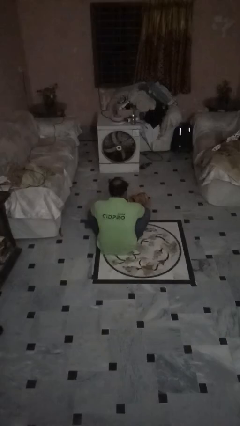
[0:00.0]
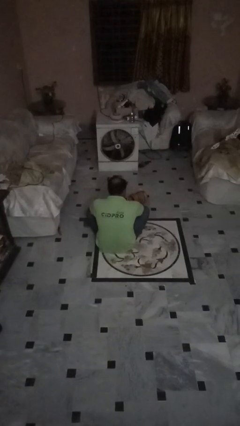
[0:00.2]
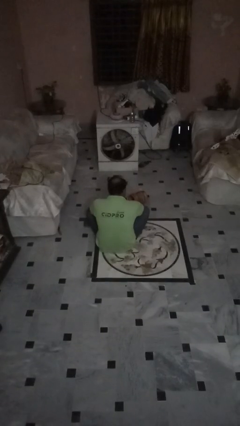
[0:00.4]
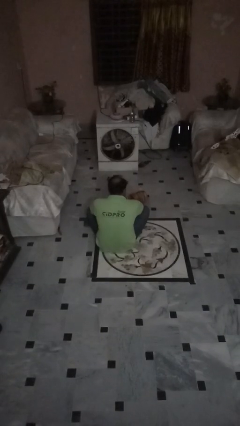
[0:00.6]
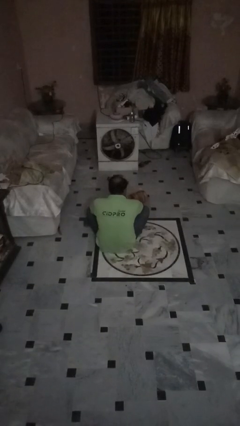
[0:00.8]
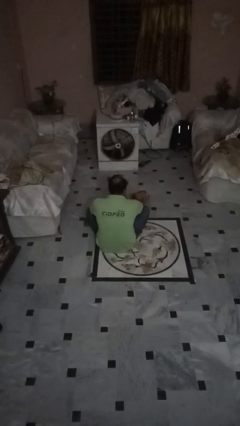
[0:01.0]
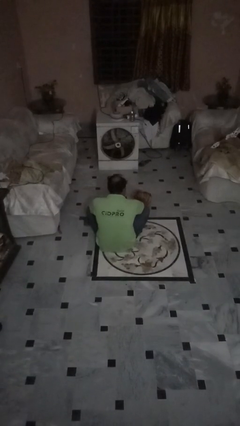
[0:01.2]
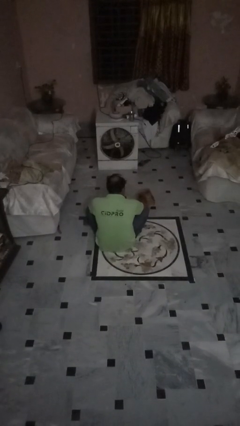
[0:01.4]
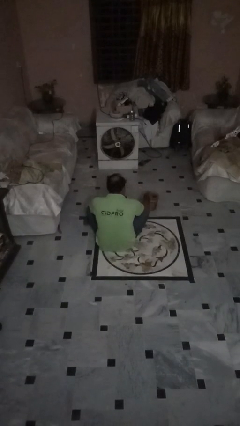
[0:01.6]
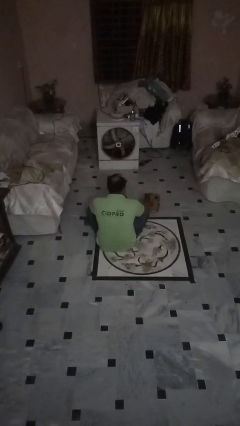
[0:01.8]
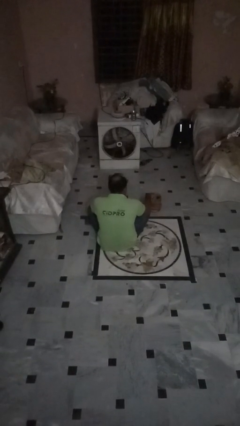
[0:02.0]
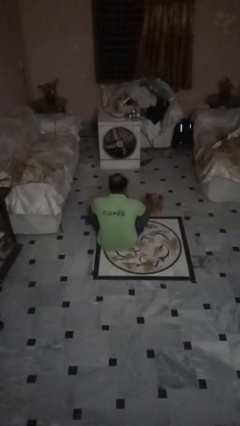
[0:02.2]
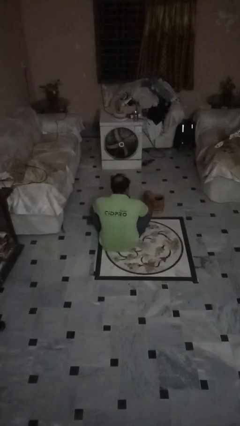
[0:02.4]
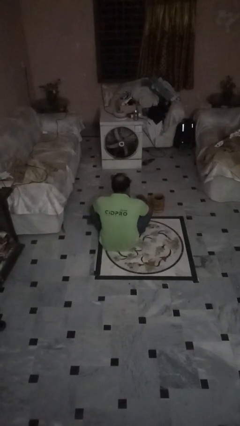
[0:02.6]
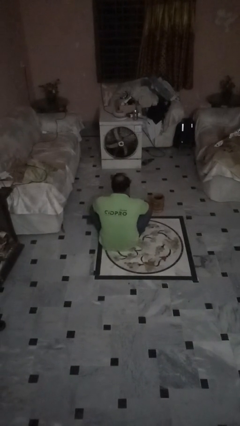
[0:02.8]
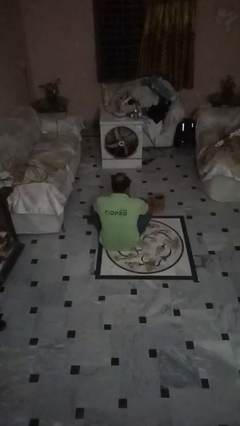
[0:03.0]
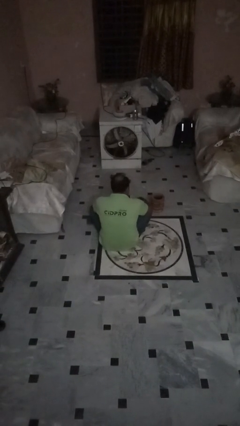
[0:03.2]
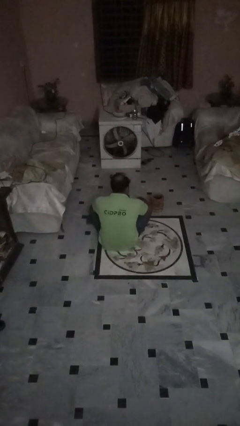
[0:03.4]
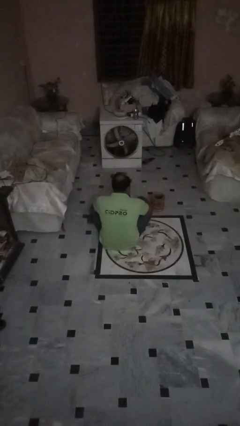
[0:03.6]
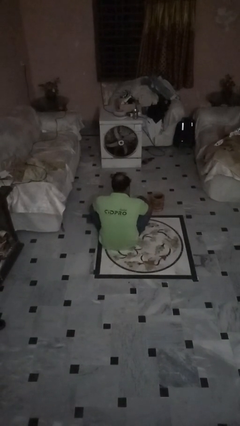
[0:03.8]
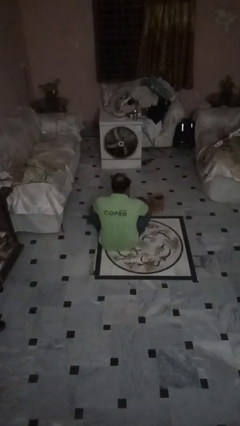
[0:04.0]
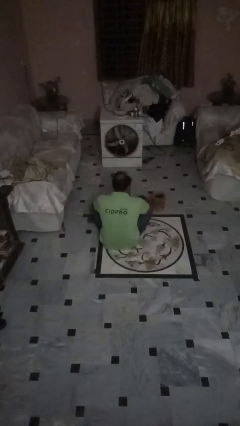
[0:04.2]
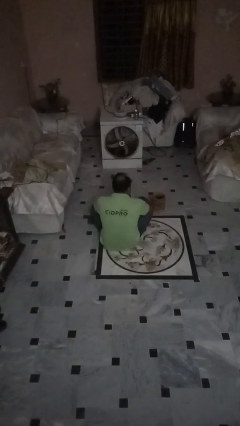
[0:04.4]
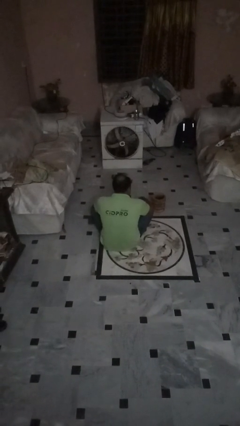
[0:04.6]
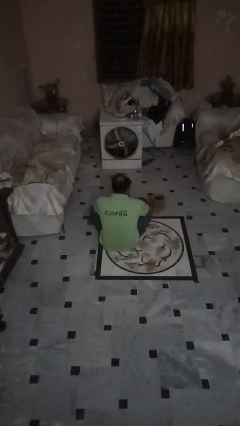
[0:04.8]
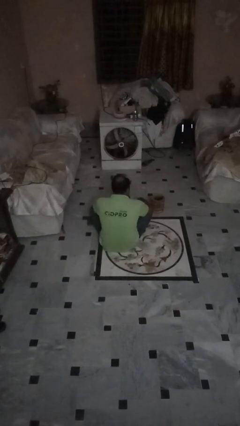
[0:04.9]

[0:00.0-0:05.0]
person sets upright furniture

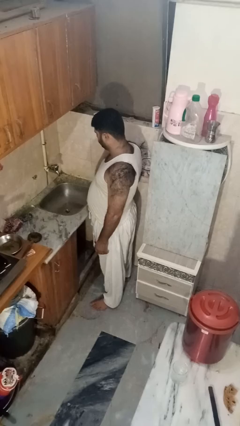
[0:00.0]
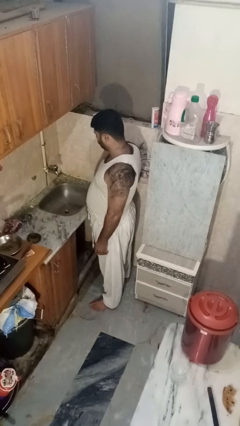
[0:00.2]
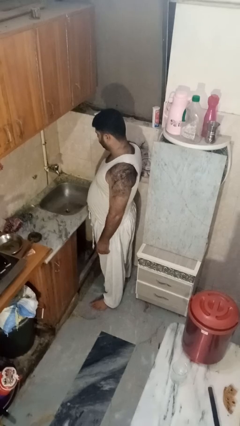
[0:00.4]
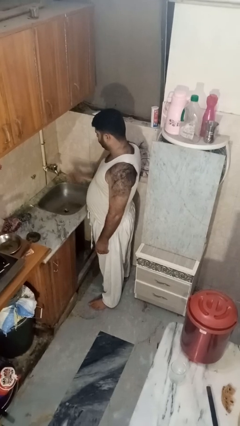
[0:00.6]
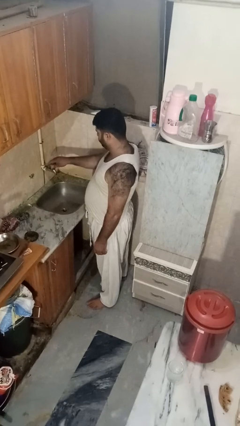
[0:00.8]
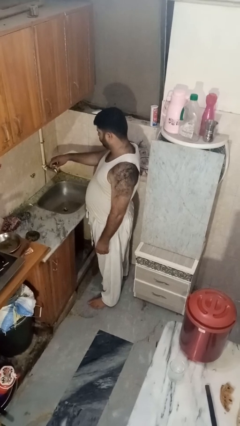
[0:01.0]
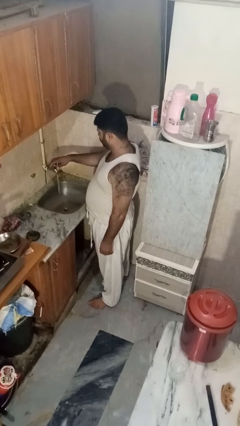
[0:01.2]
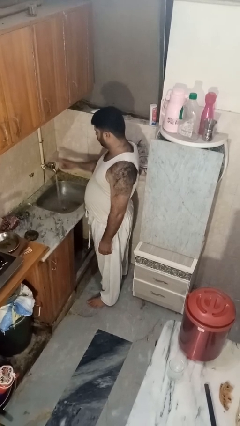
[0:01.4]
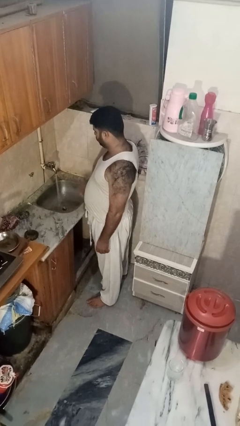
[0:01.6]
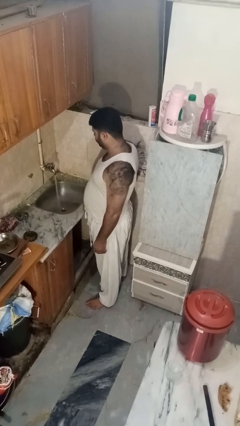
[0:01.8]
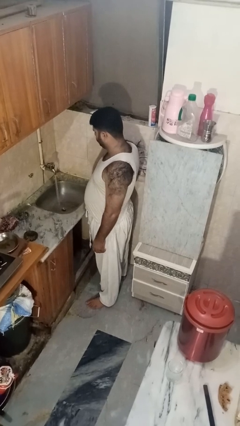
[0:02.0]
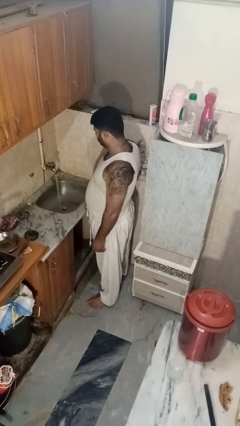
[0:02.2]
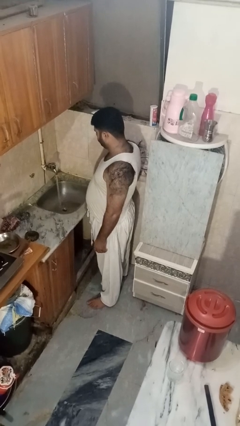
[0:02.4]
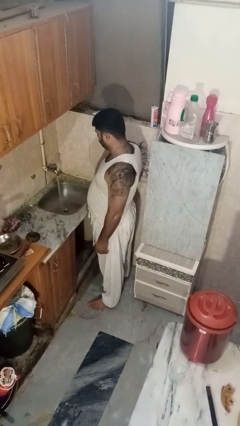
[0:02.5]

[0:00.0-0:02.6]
person turns on faucet

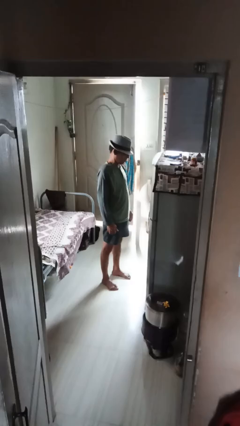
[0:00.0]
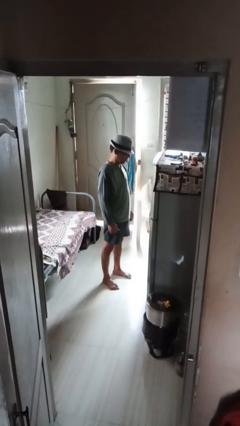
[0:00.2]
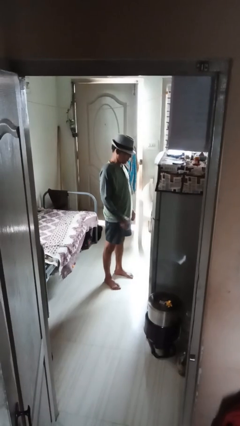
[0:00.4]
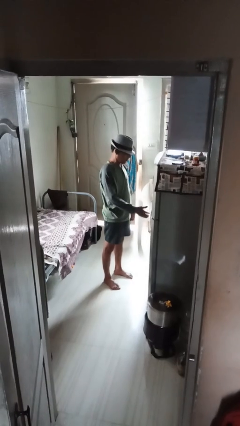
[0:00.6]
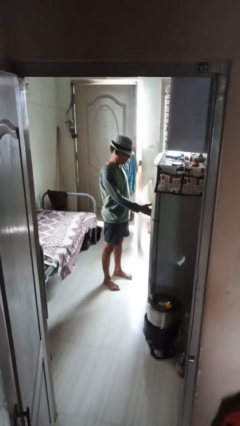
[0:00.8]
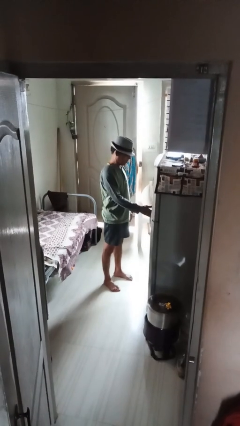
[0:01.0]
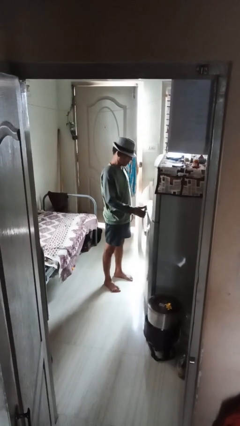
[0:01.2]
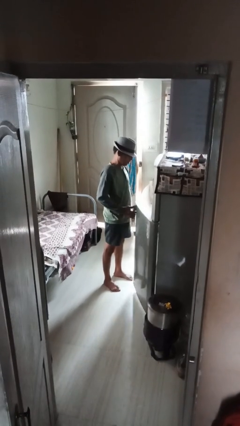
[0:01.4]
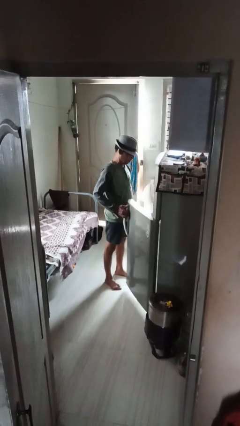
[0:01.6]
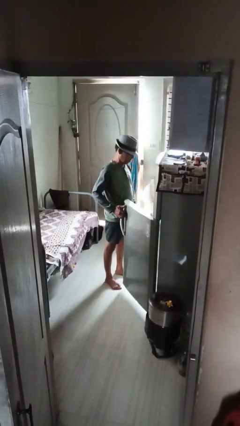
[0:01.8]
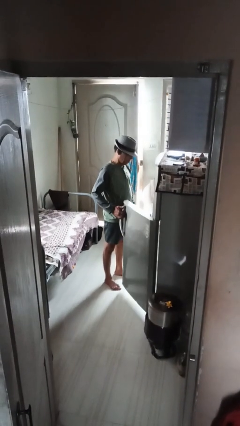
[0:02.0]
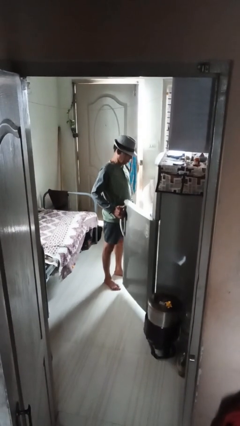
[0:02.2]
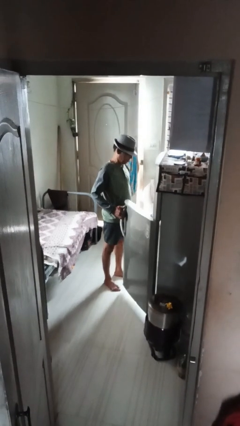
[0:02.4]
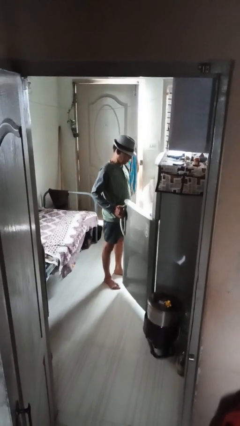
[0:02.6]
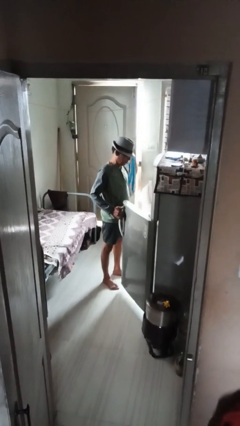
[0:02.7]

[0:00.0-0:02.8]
person opens refrigerator

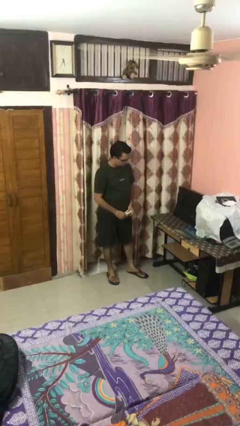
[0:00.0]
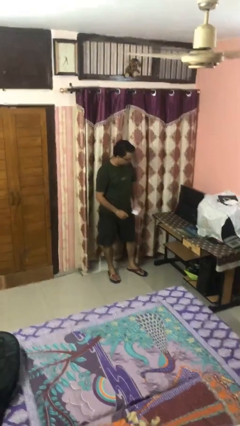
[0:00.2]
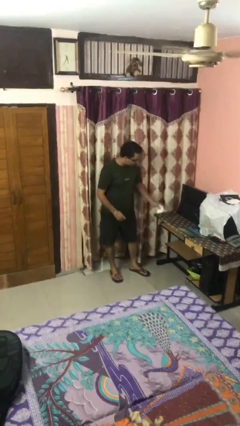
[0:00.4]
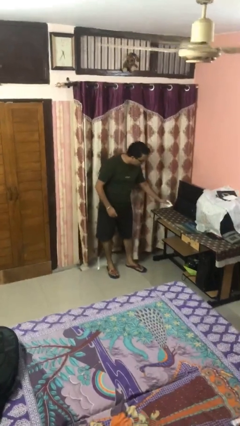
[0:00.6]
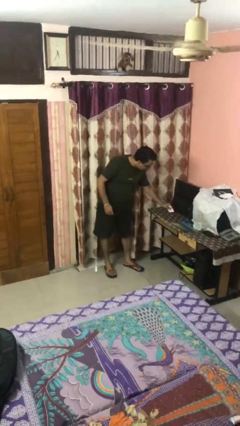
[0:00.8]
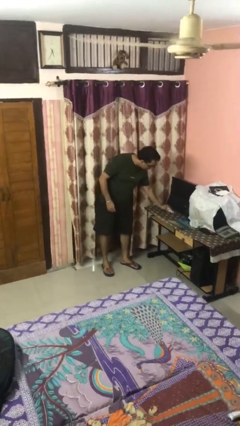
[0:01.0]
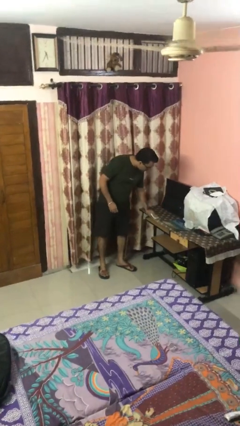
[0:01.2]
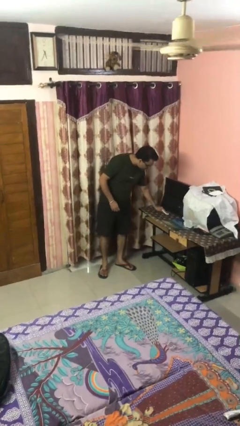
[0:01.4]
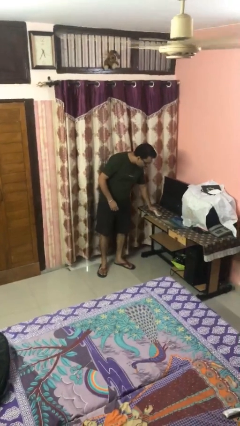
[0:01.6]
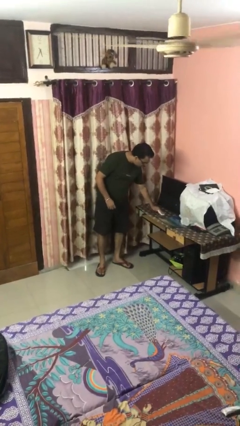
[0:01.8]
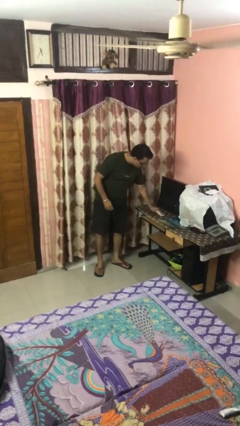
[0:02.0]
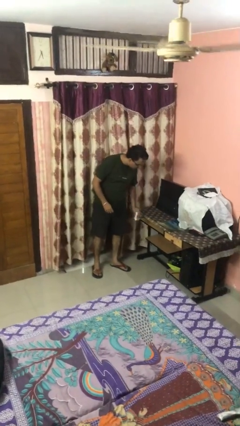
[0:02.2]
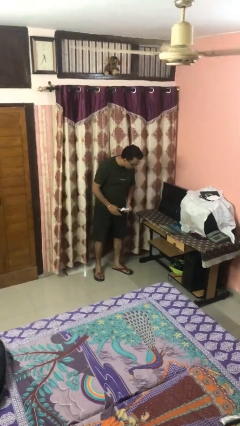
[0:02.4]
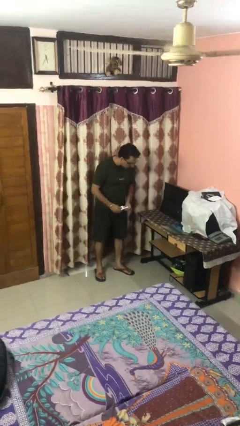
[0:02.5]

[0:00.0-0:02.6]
person cleans table with rag

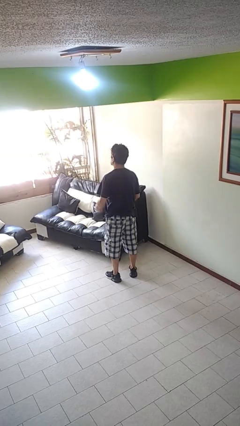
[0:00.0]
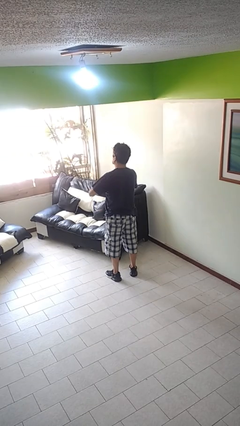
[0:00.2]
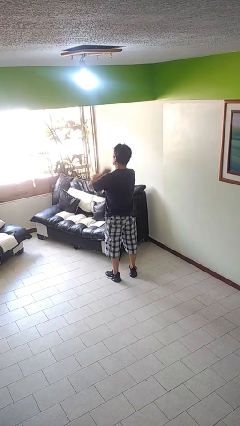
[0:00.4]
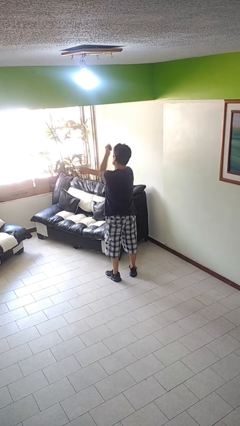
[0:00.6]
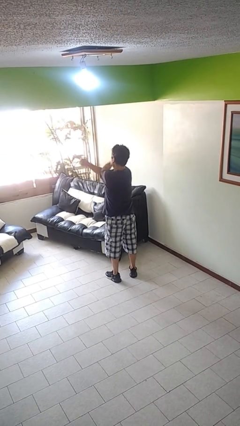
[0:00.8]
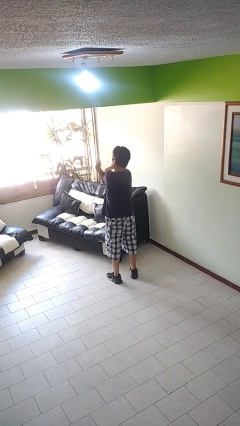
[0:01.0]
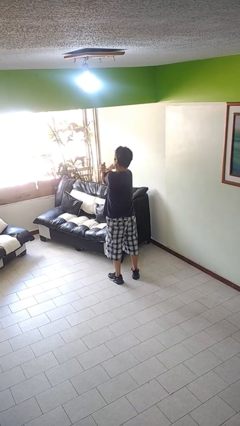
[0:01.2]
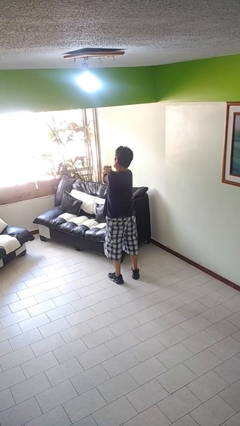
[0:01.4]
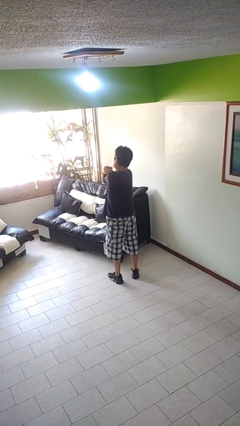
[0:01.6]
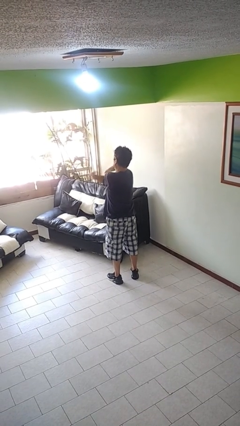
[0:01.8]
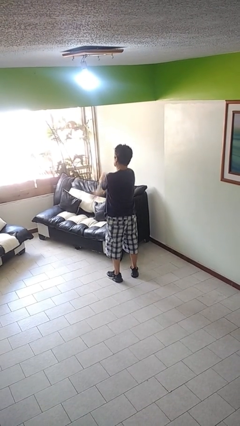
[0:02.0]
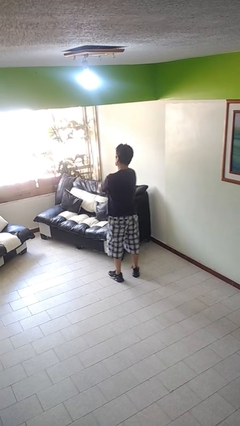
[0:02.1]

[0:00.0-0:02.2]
person stretches arms to side

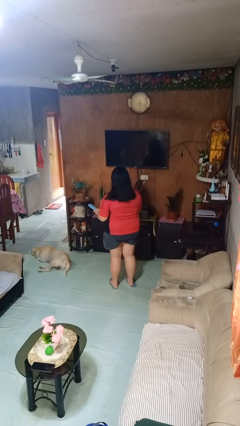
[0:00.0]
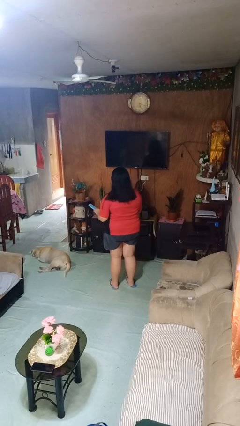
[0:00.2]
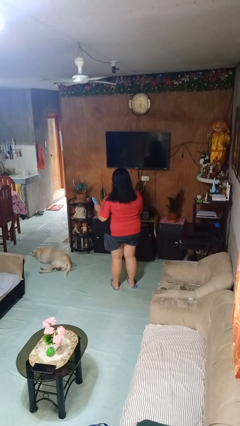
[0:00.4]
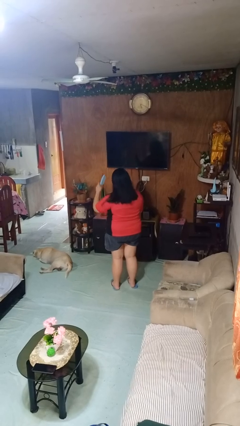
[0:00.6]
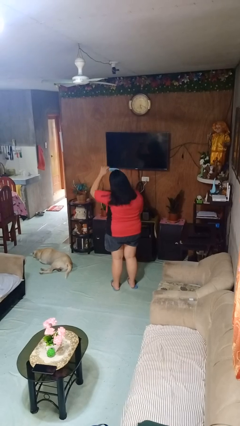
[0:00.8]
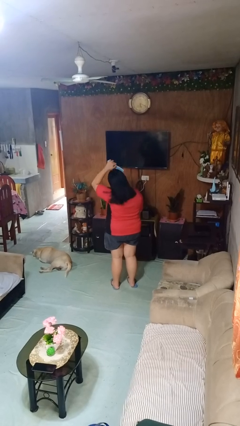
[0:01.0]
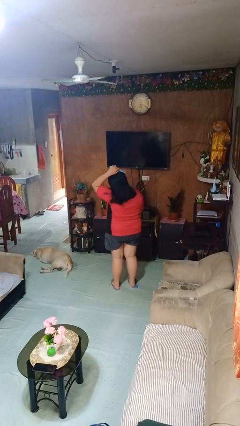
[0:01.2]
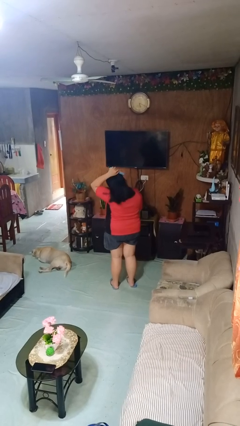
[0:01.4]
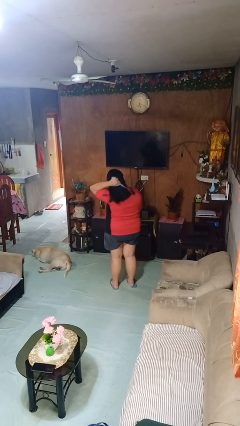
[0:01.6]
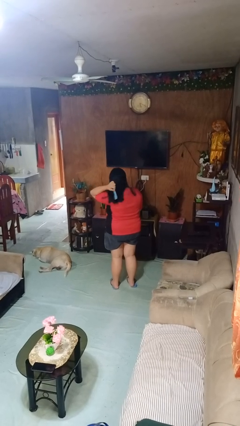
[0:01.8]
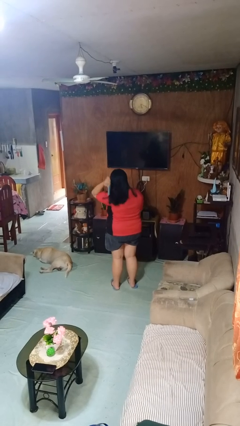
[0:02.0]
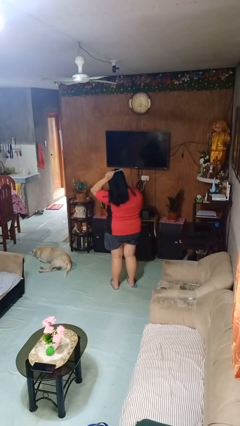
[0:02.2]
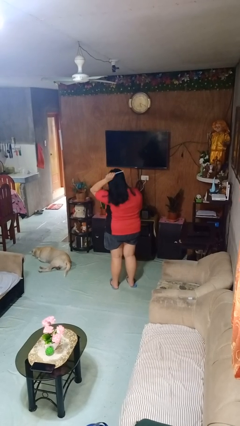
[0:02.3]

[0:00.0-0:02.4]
person brushes hair
